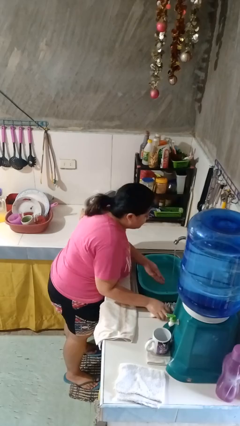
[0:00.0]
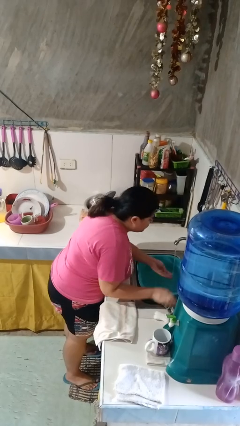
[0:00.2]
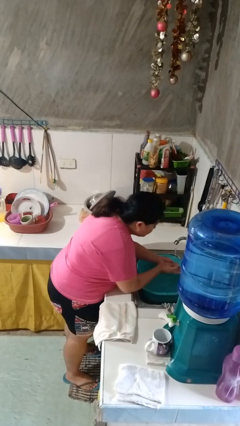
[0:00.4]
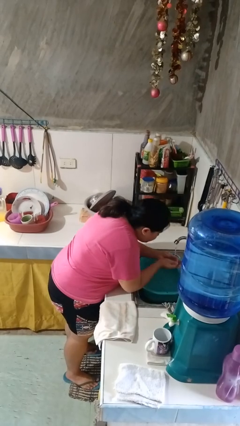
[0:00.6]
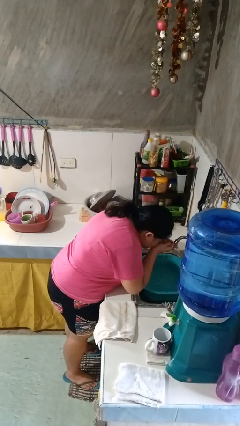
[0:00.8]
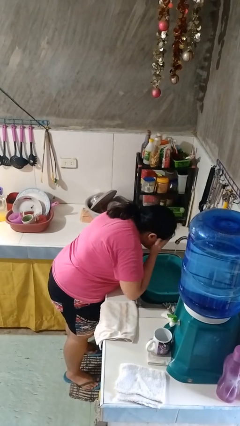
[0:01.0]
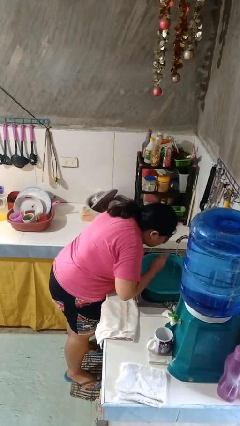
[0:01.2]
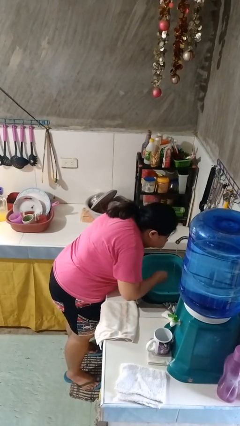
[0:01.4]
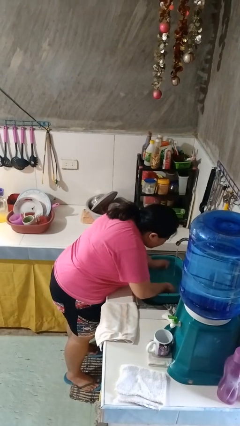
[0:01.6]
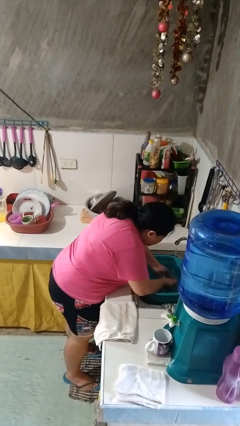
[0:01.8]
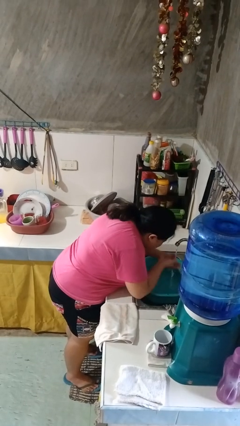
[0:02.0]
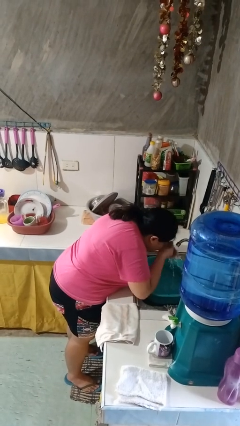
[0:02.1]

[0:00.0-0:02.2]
person washes face

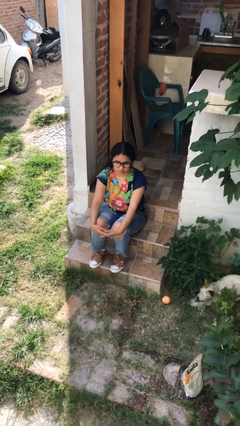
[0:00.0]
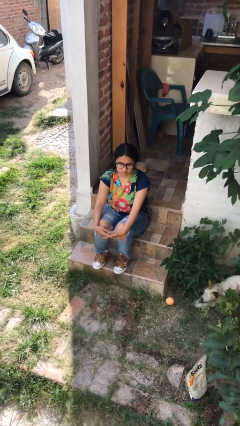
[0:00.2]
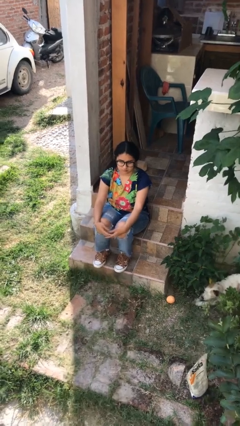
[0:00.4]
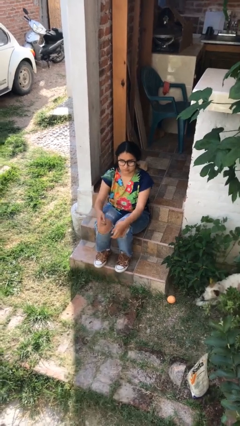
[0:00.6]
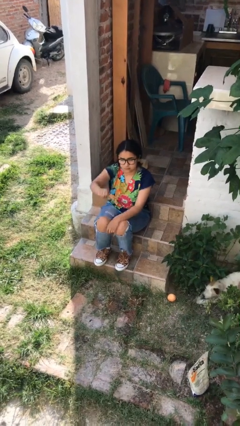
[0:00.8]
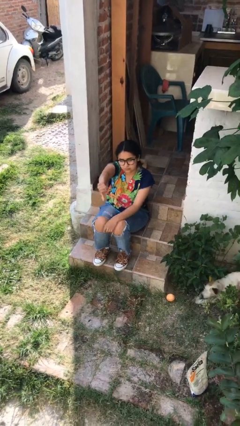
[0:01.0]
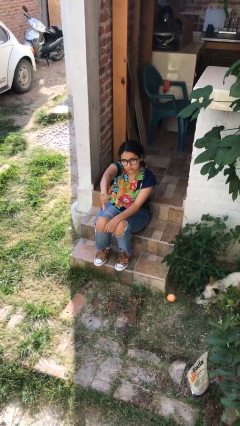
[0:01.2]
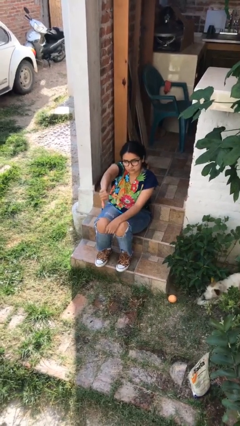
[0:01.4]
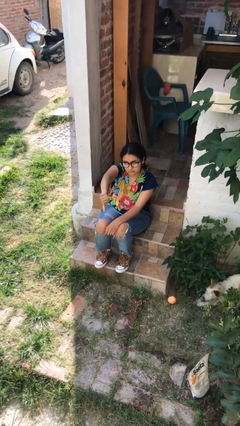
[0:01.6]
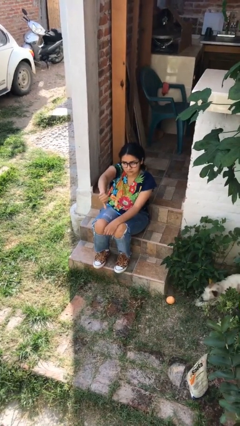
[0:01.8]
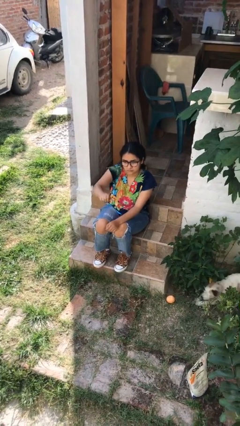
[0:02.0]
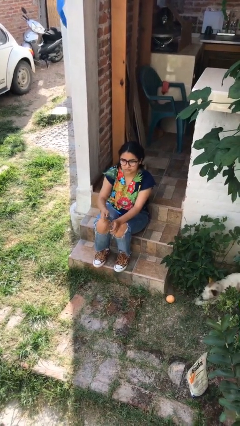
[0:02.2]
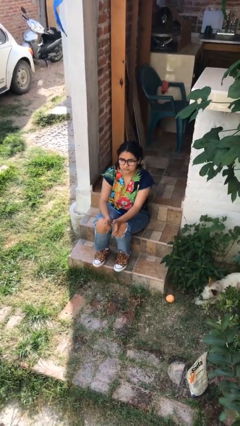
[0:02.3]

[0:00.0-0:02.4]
person gestures thumbs down

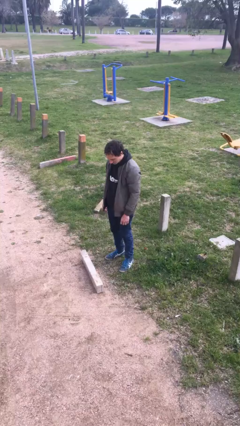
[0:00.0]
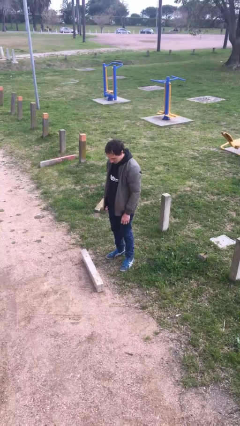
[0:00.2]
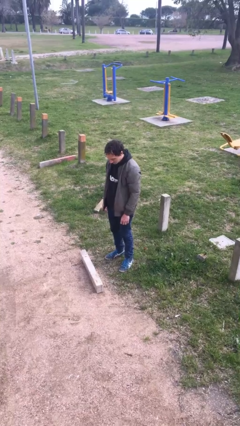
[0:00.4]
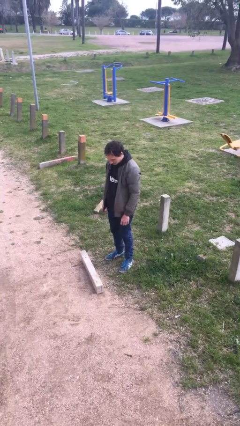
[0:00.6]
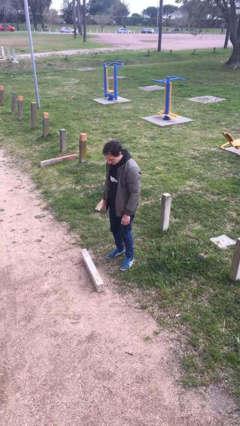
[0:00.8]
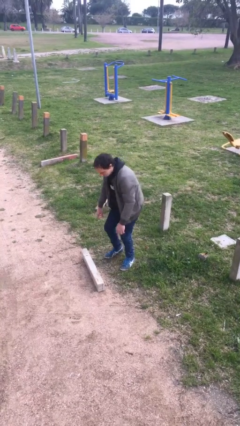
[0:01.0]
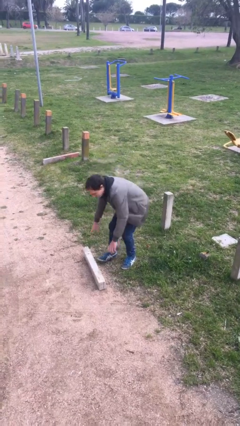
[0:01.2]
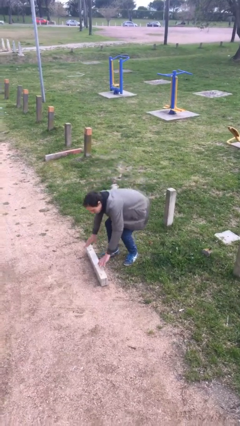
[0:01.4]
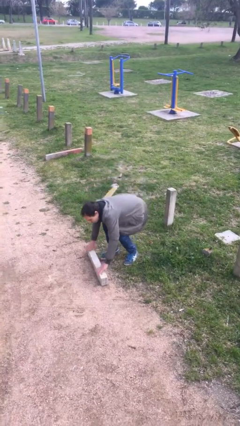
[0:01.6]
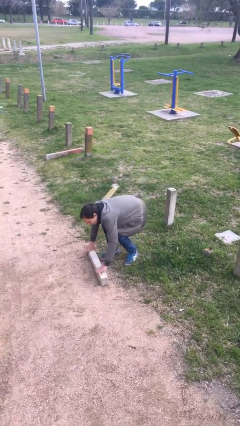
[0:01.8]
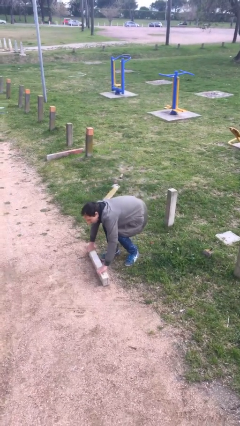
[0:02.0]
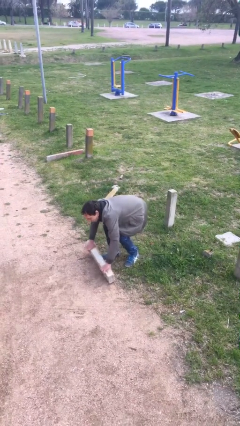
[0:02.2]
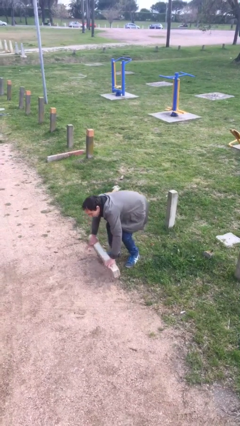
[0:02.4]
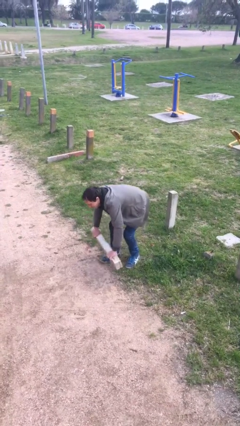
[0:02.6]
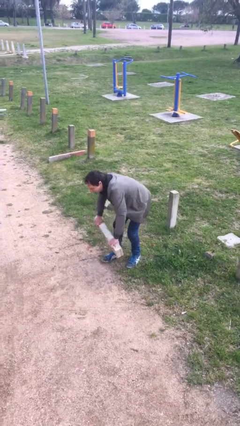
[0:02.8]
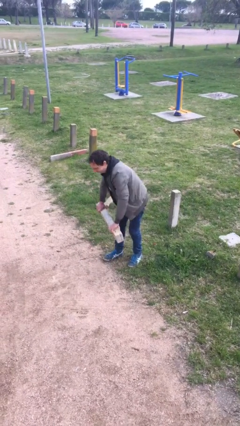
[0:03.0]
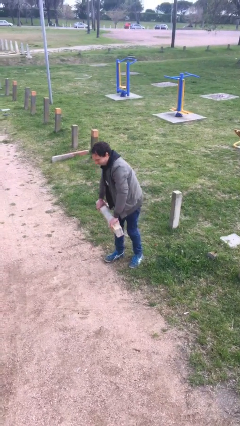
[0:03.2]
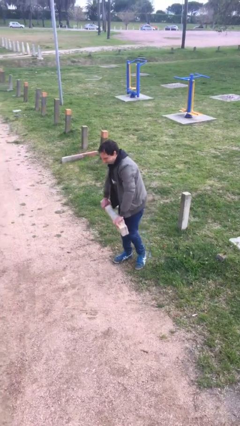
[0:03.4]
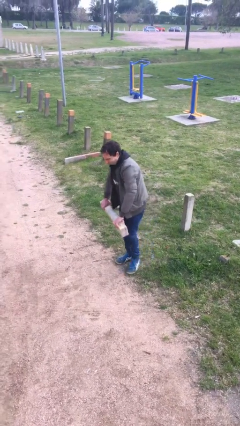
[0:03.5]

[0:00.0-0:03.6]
person picks up object from floor

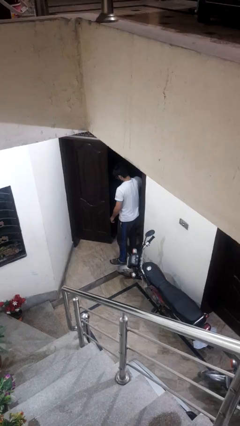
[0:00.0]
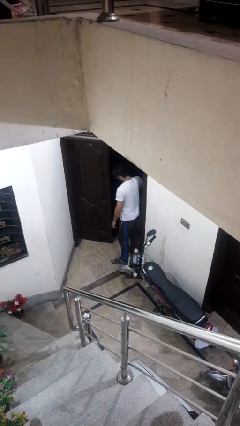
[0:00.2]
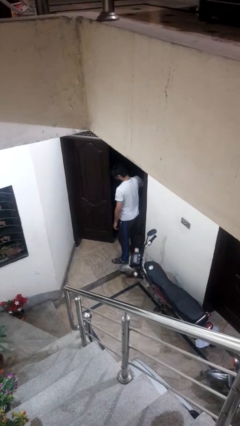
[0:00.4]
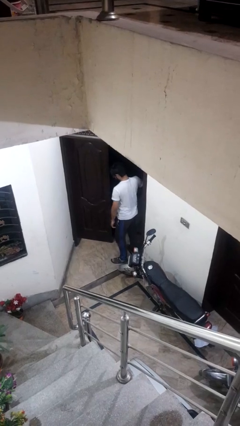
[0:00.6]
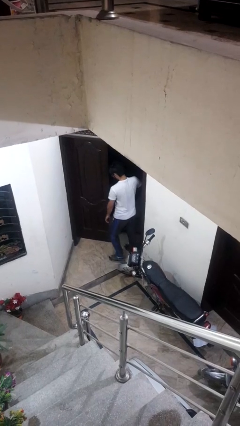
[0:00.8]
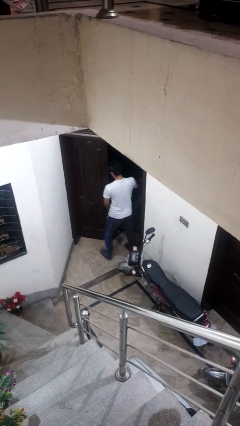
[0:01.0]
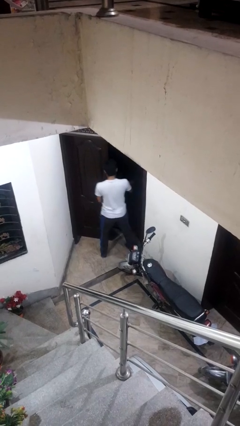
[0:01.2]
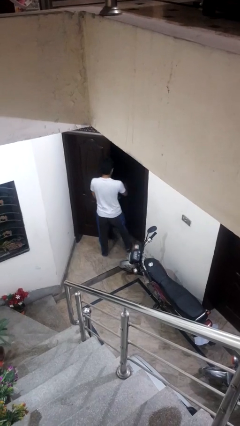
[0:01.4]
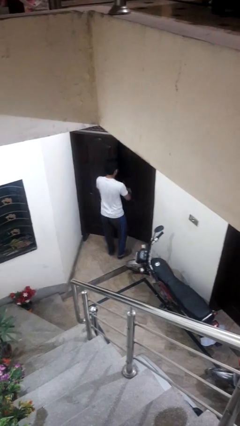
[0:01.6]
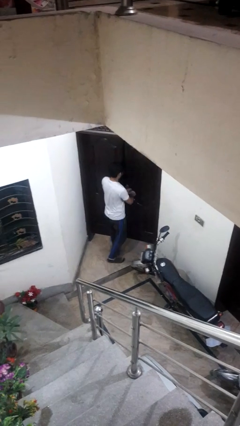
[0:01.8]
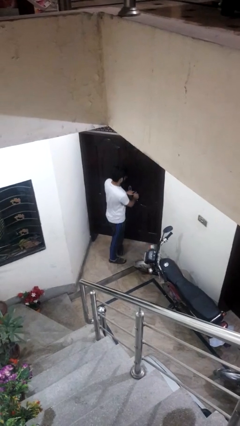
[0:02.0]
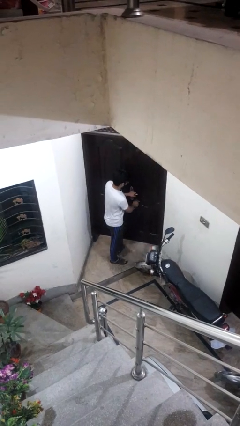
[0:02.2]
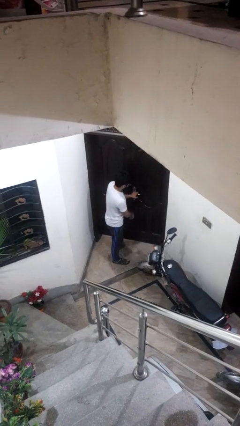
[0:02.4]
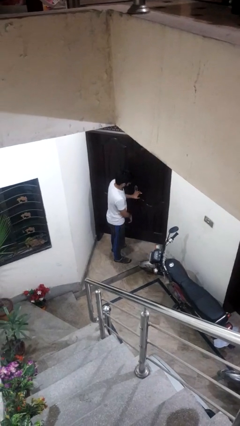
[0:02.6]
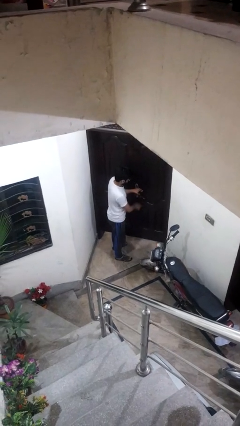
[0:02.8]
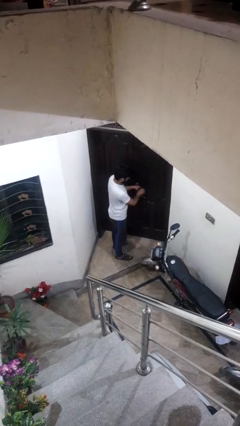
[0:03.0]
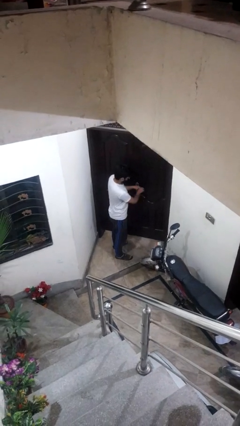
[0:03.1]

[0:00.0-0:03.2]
person closes facility door

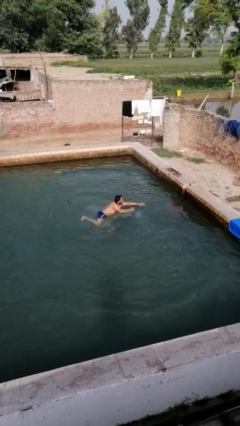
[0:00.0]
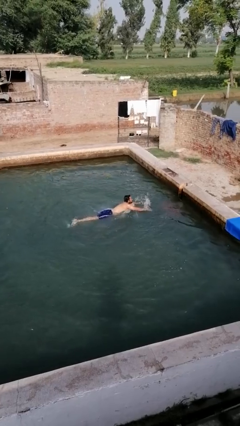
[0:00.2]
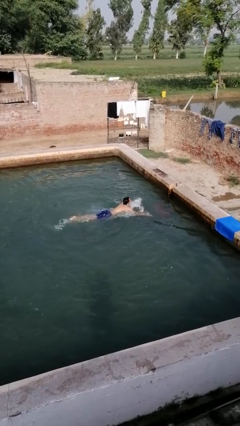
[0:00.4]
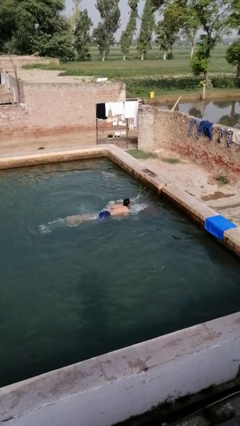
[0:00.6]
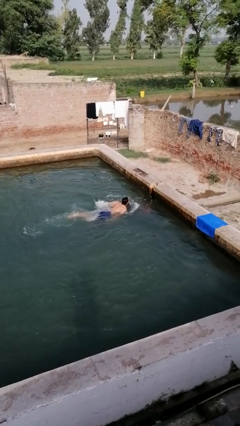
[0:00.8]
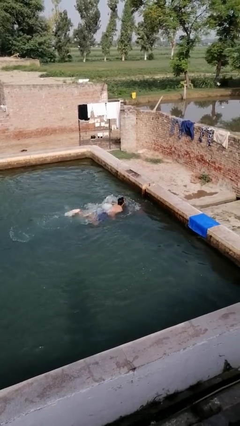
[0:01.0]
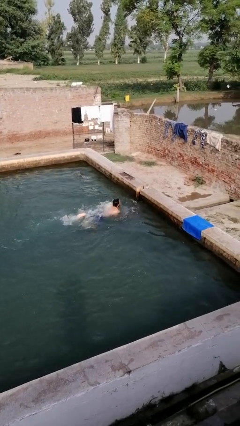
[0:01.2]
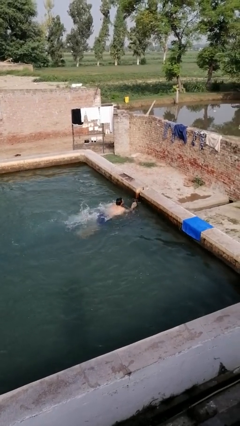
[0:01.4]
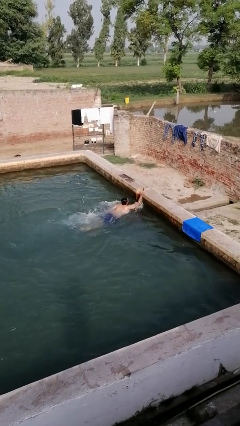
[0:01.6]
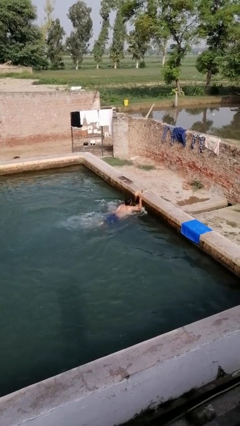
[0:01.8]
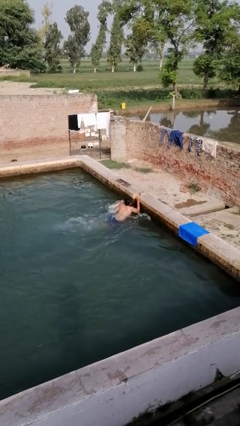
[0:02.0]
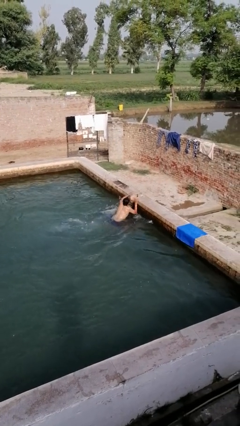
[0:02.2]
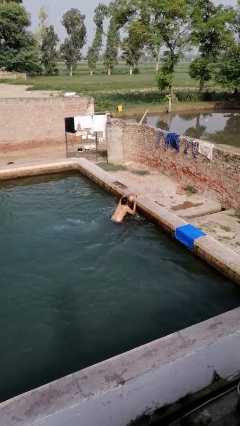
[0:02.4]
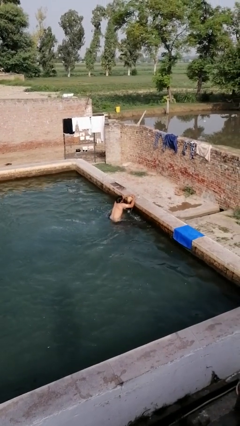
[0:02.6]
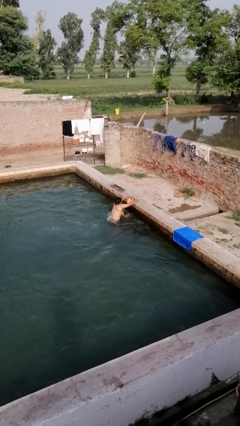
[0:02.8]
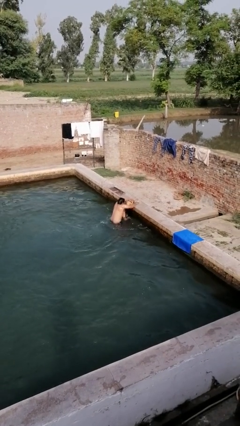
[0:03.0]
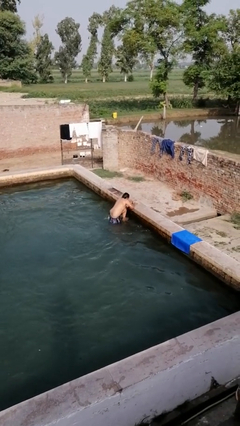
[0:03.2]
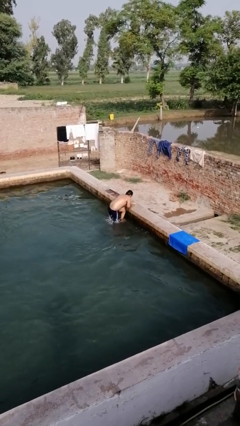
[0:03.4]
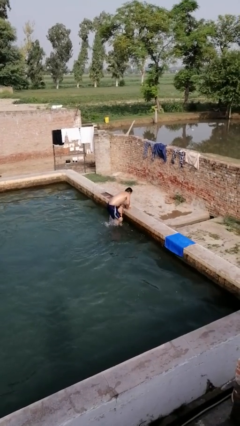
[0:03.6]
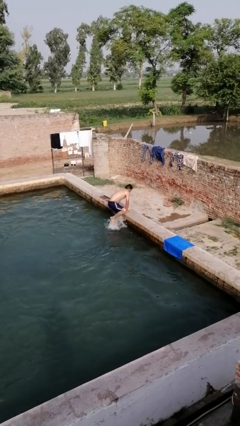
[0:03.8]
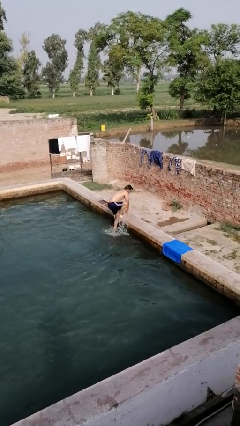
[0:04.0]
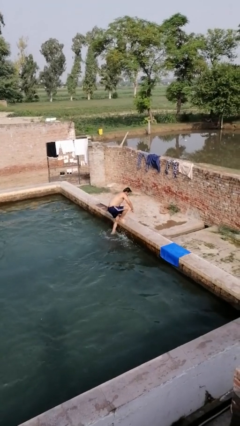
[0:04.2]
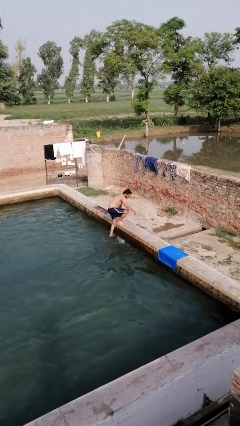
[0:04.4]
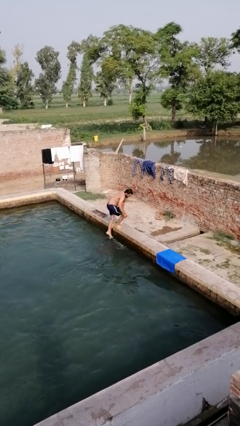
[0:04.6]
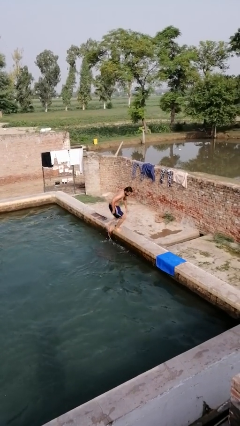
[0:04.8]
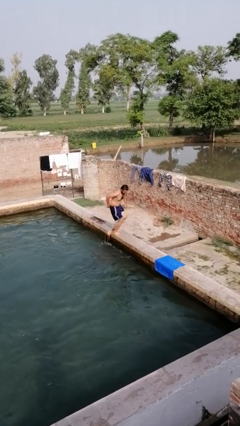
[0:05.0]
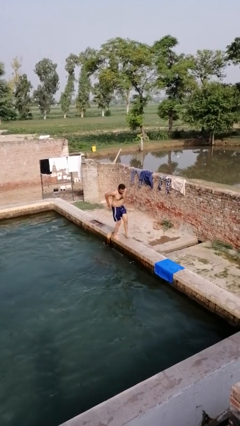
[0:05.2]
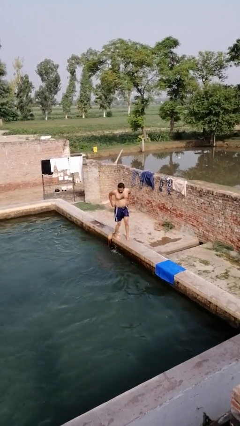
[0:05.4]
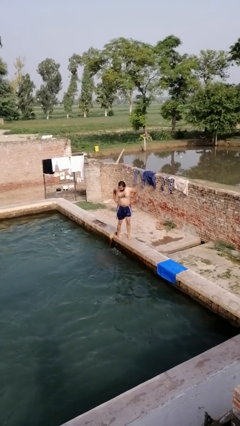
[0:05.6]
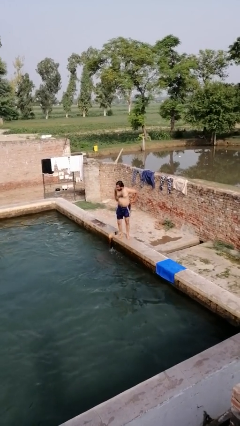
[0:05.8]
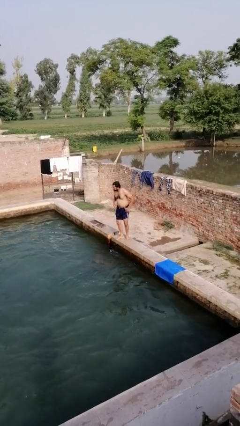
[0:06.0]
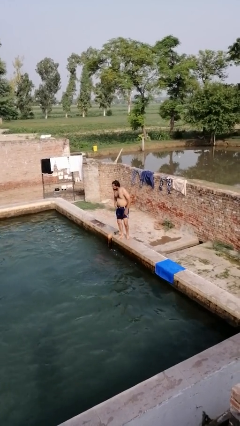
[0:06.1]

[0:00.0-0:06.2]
person exits pool
